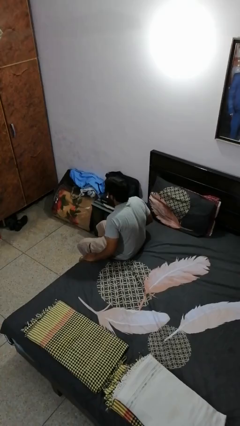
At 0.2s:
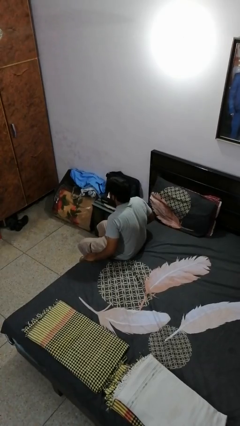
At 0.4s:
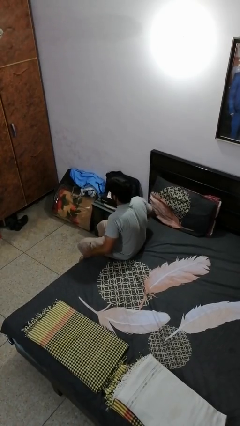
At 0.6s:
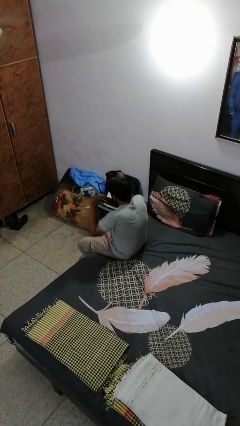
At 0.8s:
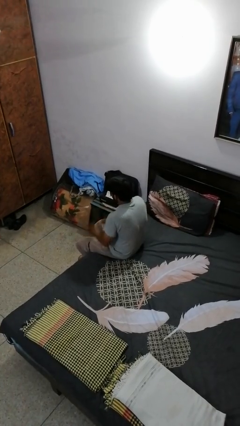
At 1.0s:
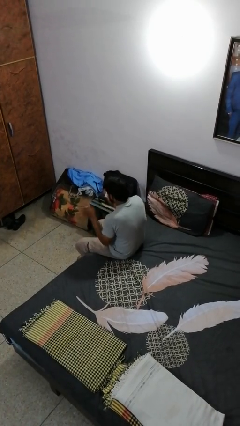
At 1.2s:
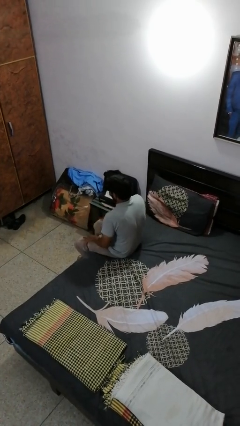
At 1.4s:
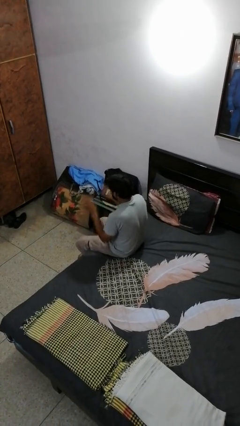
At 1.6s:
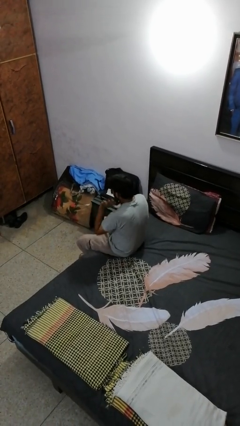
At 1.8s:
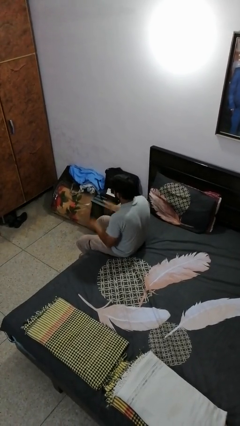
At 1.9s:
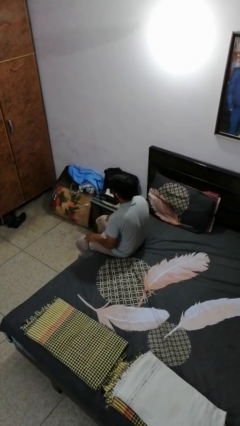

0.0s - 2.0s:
person slaps hands on thighs

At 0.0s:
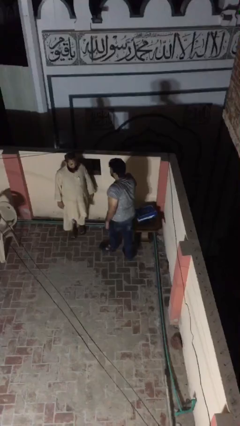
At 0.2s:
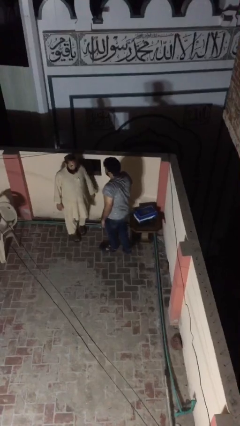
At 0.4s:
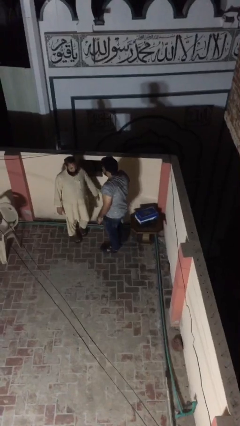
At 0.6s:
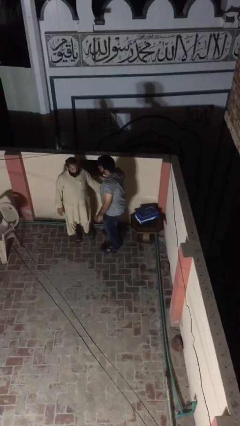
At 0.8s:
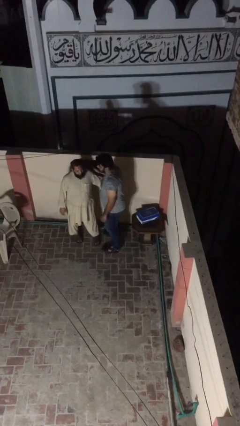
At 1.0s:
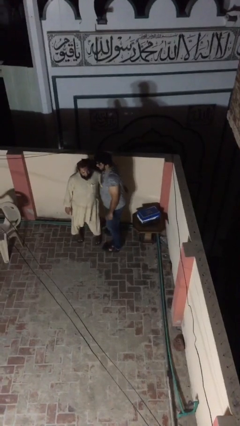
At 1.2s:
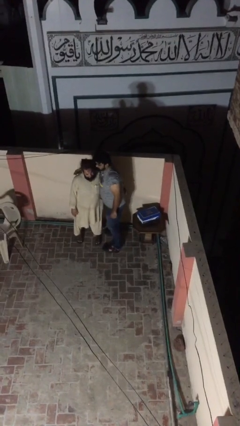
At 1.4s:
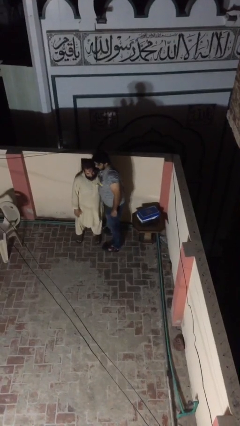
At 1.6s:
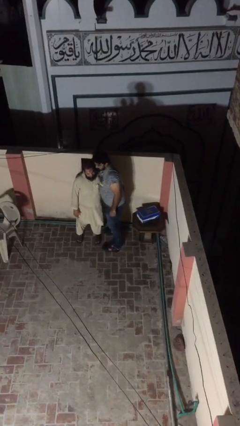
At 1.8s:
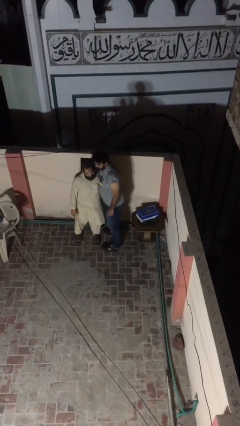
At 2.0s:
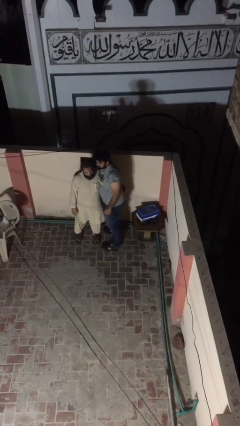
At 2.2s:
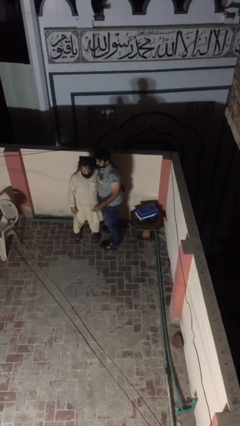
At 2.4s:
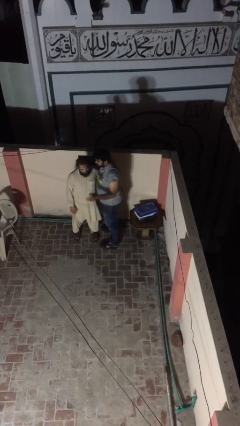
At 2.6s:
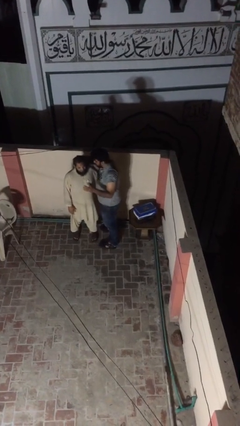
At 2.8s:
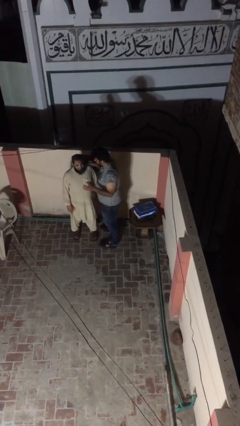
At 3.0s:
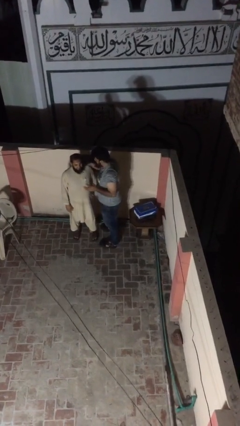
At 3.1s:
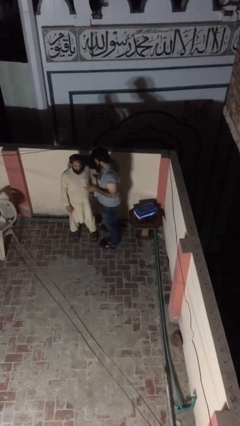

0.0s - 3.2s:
person embraces person

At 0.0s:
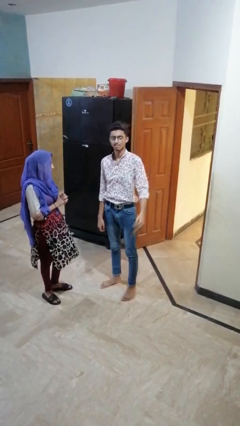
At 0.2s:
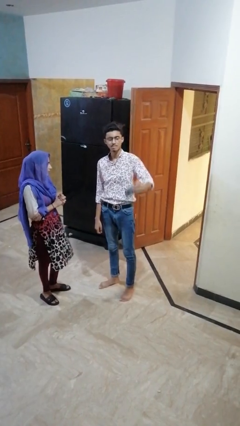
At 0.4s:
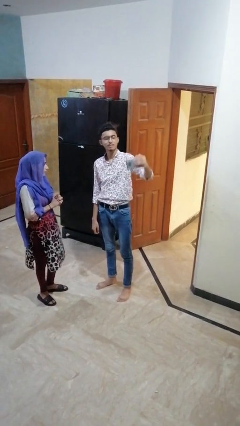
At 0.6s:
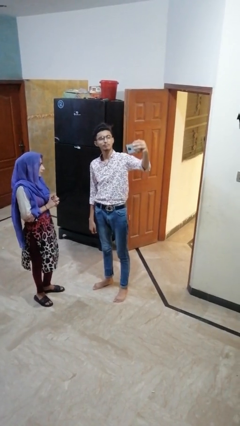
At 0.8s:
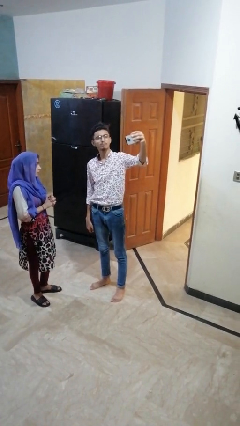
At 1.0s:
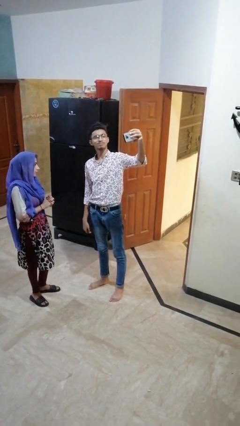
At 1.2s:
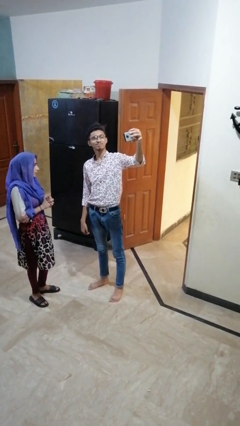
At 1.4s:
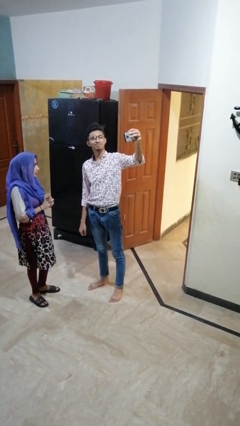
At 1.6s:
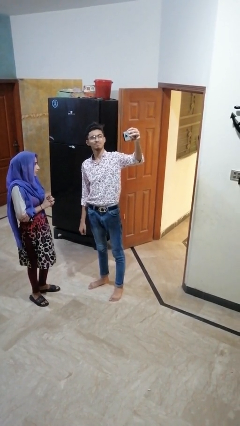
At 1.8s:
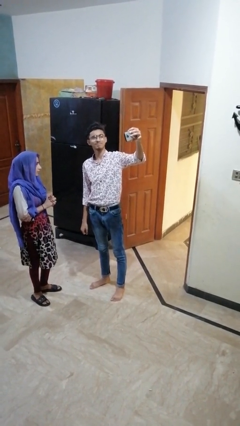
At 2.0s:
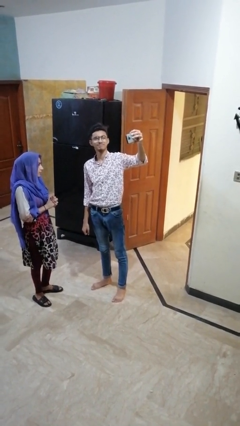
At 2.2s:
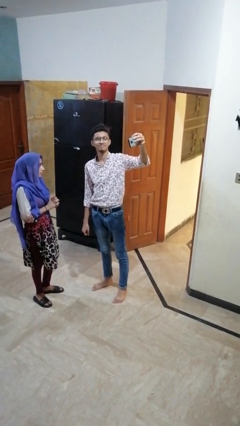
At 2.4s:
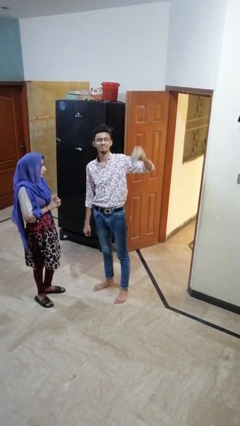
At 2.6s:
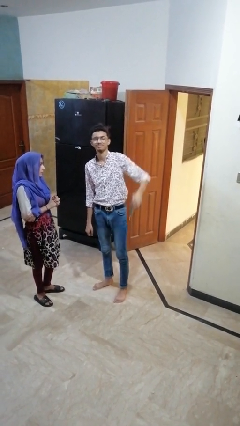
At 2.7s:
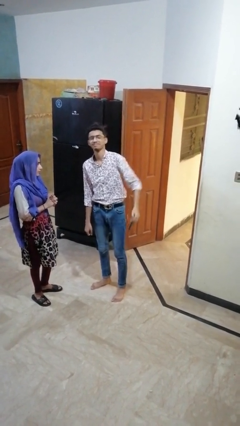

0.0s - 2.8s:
person takes selfie with person

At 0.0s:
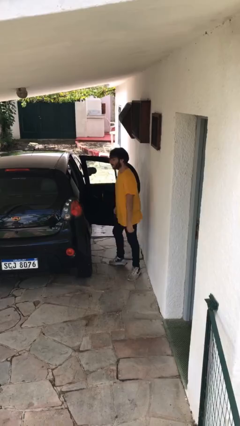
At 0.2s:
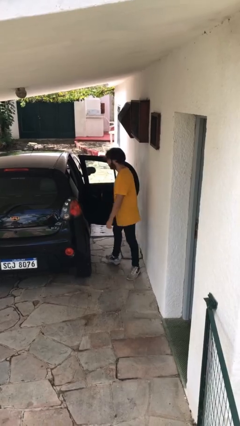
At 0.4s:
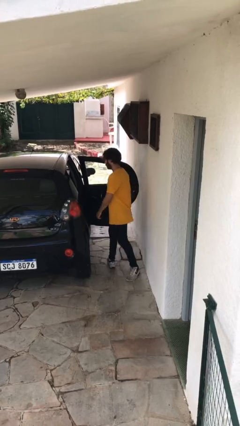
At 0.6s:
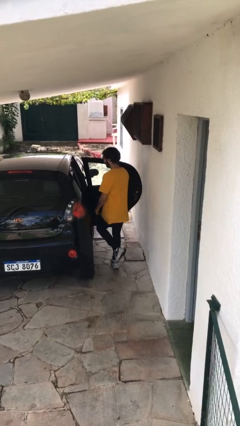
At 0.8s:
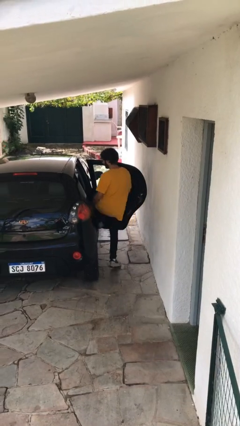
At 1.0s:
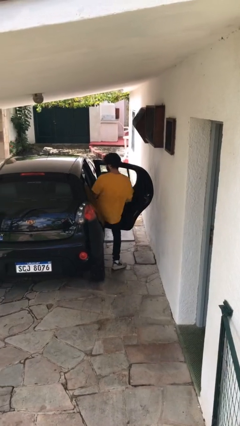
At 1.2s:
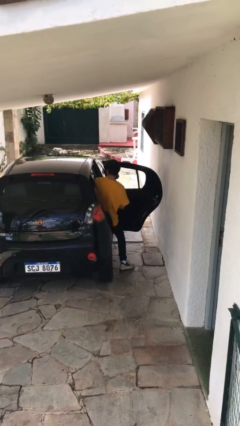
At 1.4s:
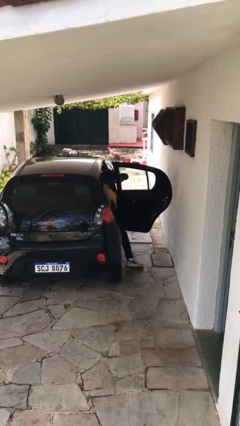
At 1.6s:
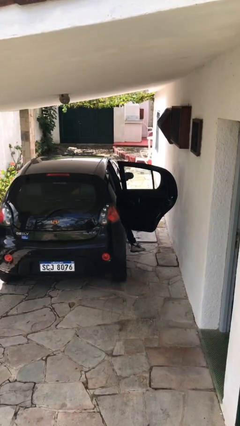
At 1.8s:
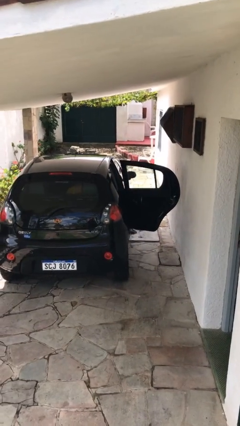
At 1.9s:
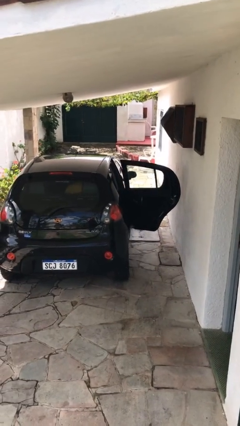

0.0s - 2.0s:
person enters car

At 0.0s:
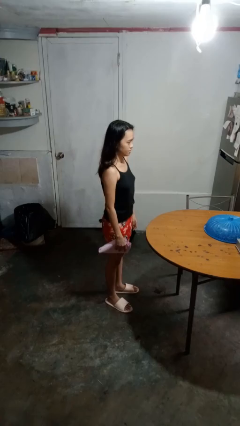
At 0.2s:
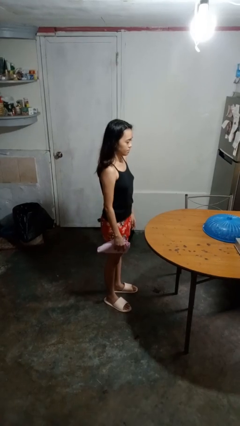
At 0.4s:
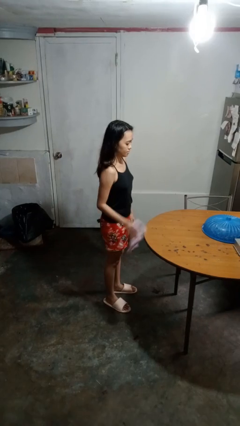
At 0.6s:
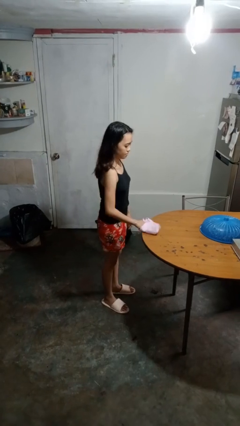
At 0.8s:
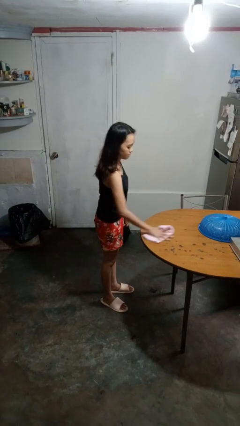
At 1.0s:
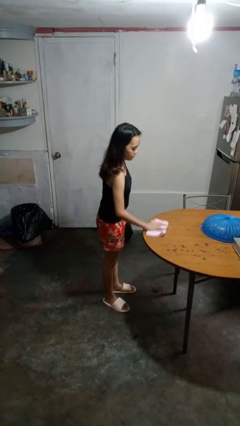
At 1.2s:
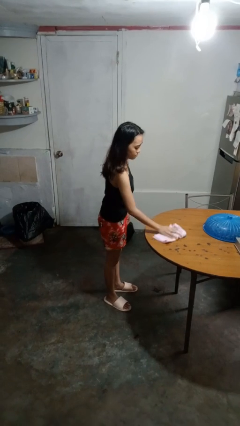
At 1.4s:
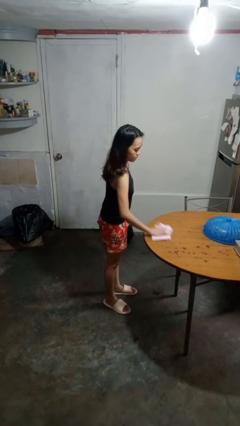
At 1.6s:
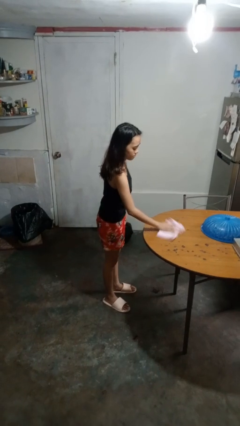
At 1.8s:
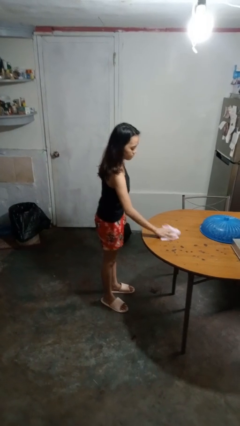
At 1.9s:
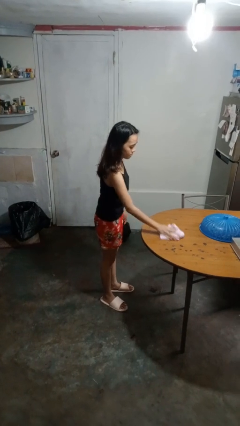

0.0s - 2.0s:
person cleans table with rag

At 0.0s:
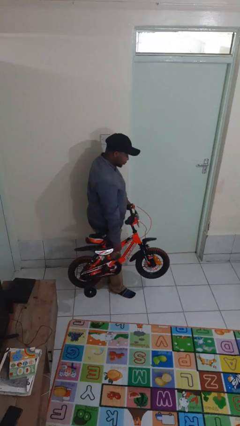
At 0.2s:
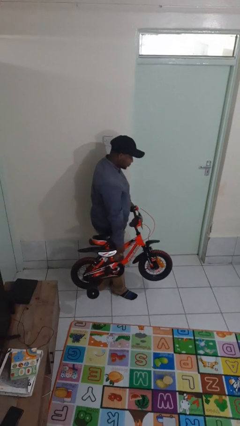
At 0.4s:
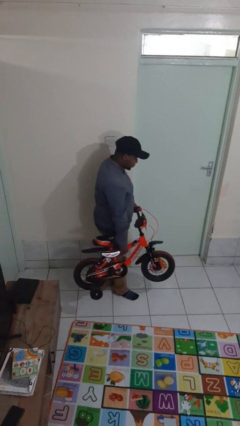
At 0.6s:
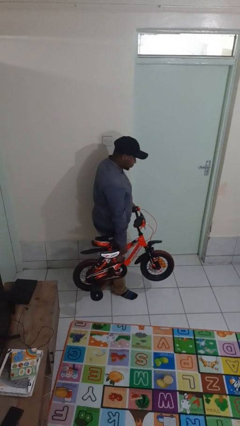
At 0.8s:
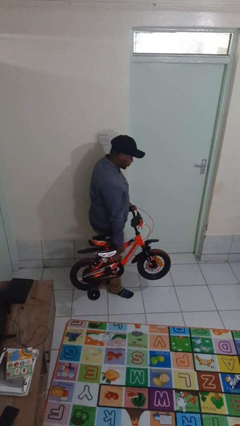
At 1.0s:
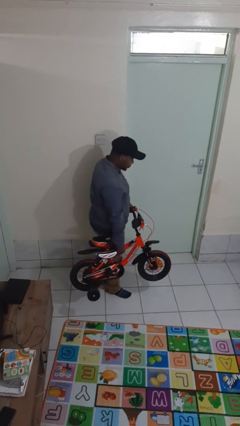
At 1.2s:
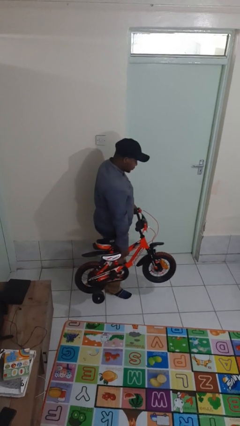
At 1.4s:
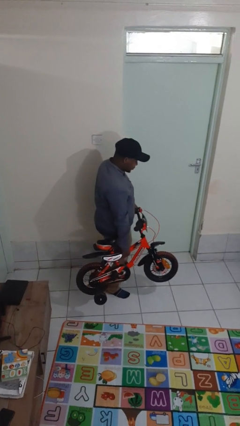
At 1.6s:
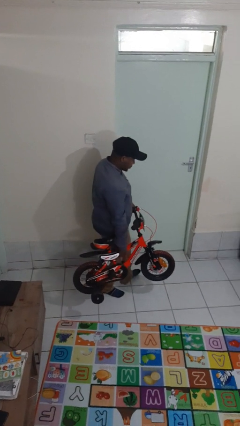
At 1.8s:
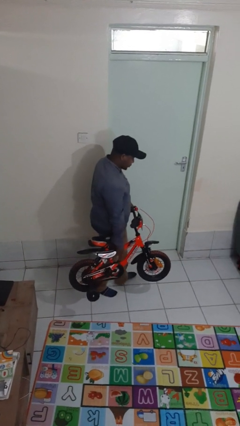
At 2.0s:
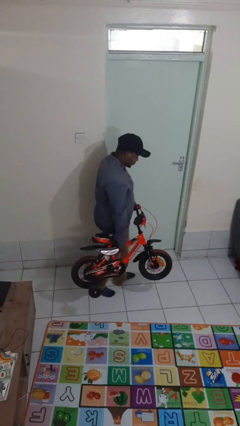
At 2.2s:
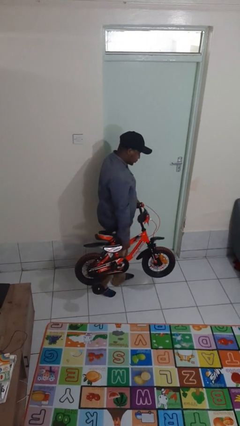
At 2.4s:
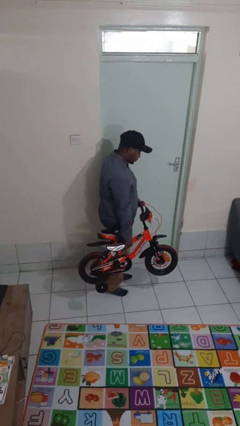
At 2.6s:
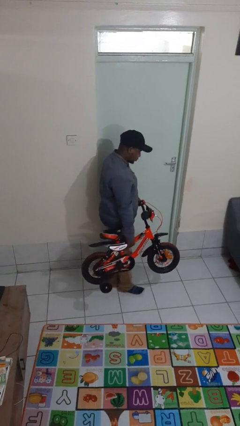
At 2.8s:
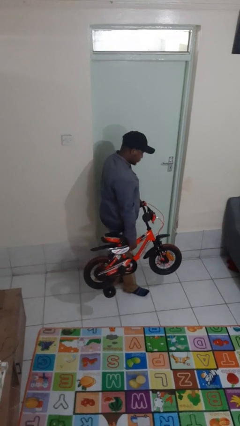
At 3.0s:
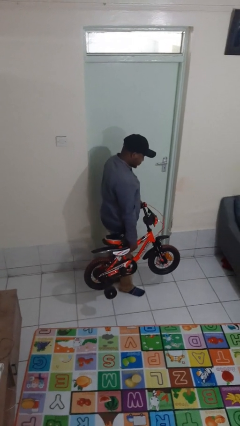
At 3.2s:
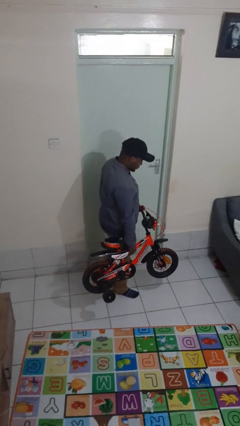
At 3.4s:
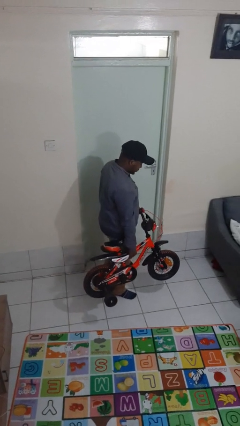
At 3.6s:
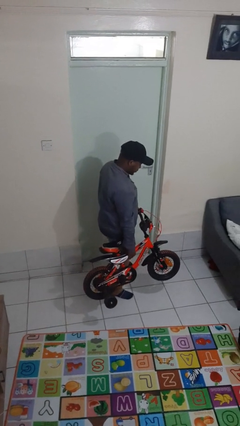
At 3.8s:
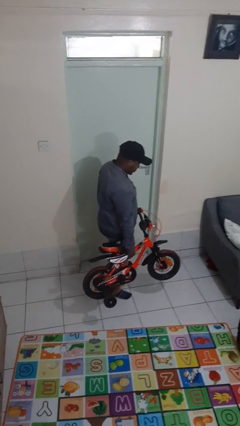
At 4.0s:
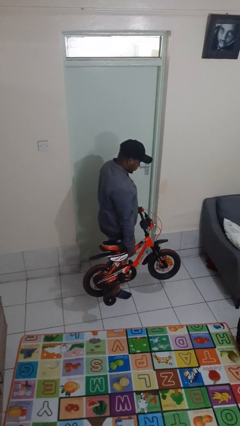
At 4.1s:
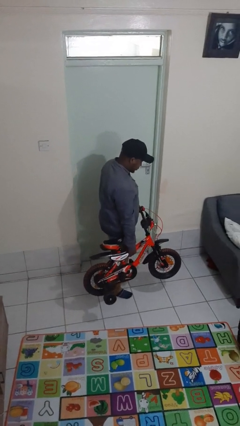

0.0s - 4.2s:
person carries bicycle

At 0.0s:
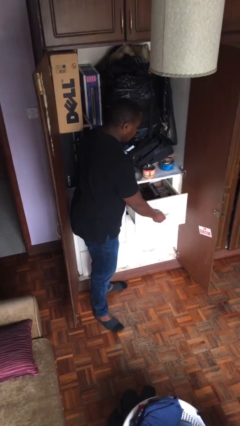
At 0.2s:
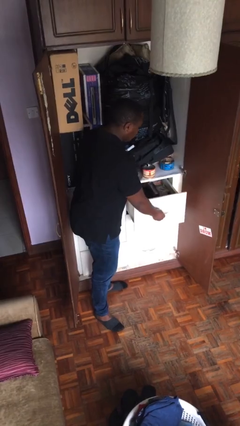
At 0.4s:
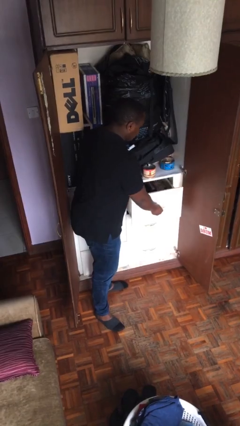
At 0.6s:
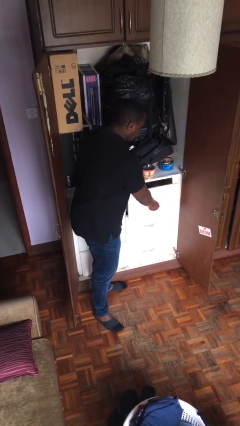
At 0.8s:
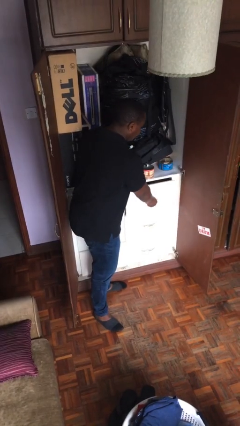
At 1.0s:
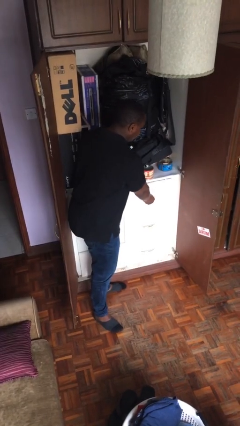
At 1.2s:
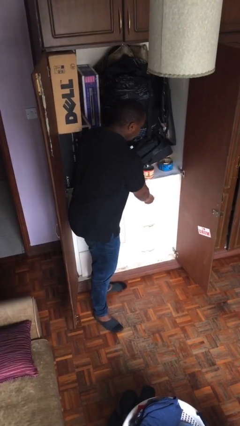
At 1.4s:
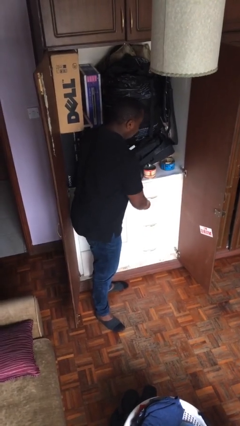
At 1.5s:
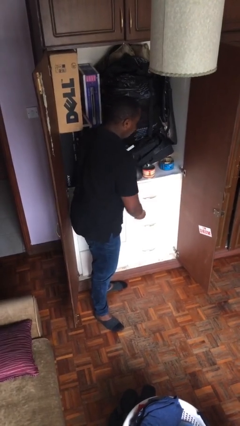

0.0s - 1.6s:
person closes dresser drawer
